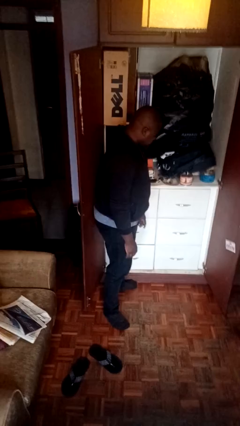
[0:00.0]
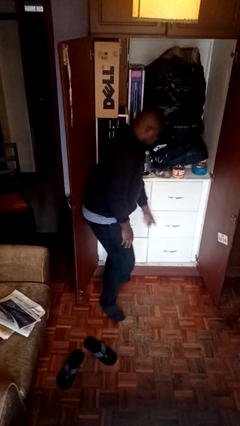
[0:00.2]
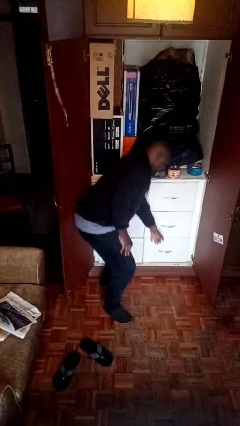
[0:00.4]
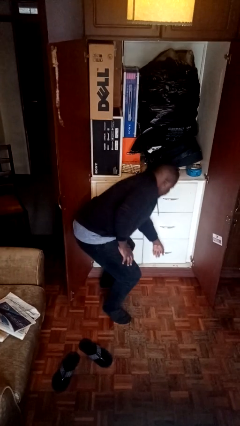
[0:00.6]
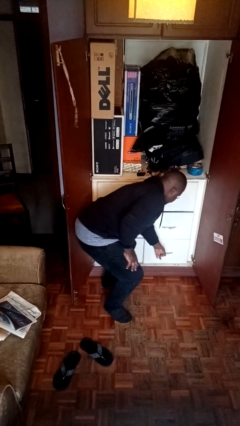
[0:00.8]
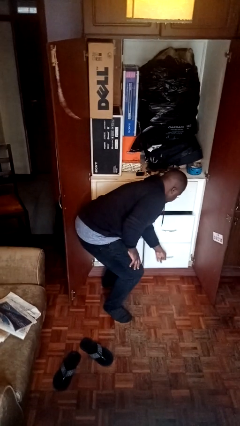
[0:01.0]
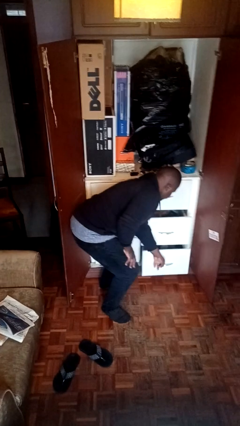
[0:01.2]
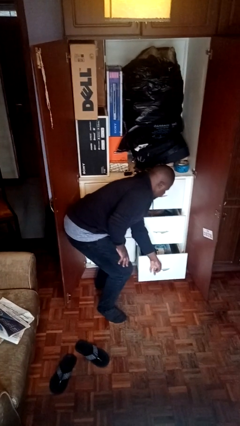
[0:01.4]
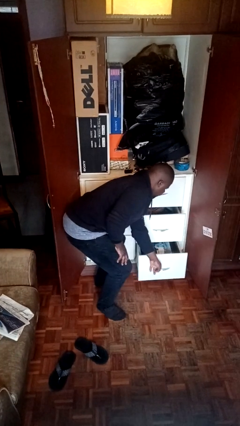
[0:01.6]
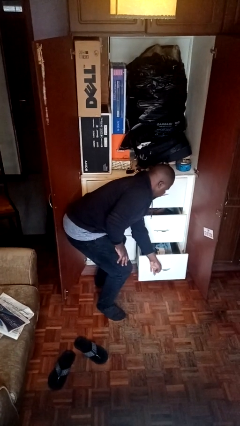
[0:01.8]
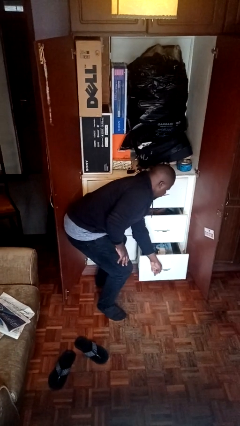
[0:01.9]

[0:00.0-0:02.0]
person opens dresser drawer

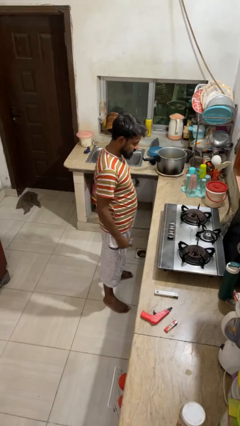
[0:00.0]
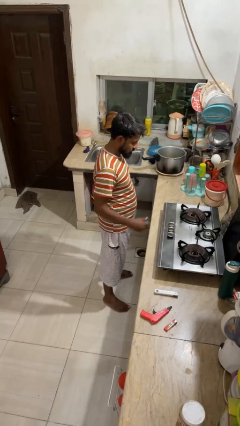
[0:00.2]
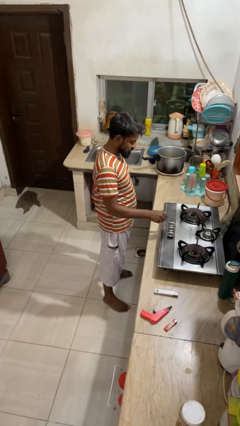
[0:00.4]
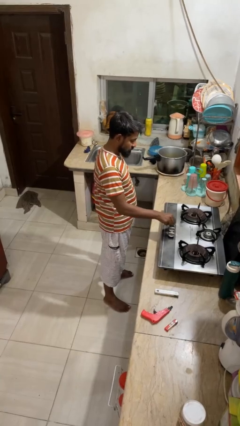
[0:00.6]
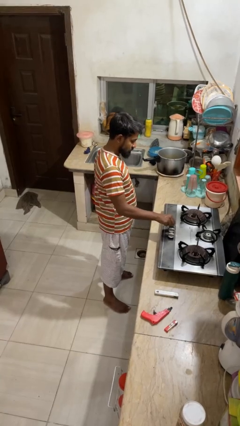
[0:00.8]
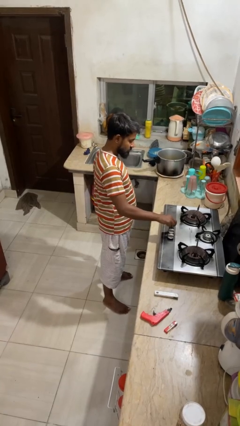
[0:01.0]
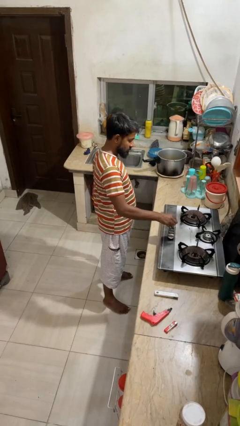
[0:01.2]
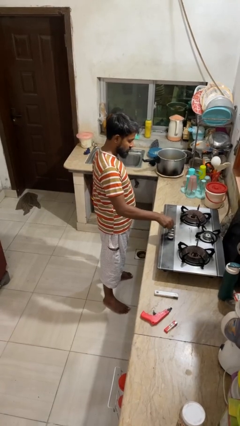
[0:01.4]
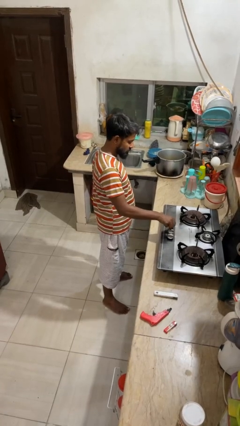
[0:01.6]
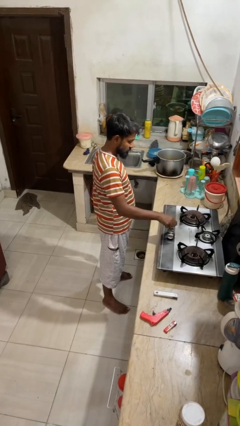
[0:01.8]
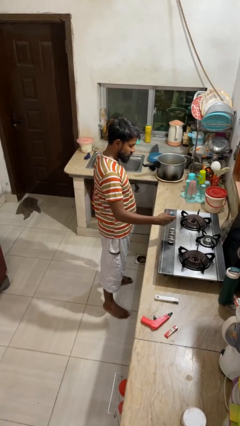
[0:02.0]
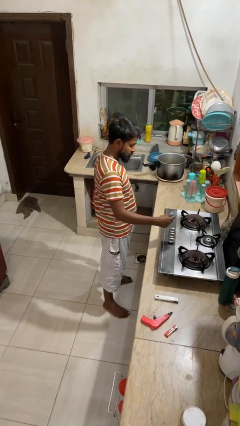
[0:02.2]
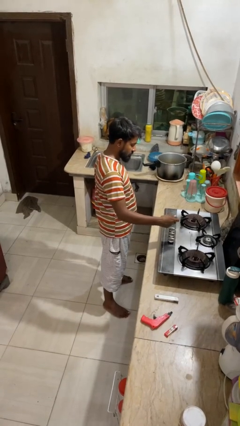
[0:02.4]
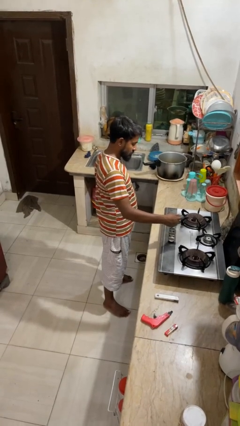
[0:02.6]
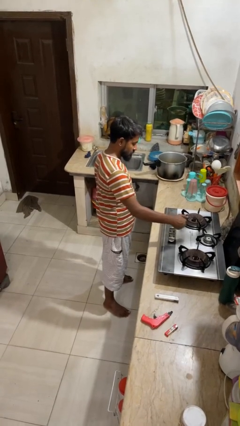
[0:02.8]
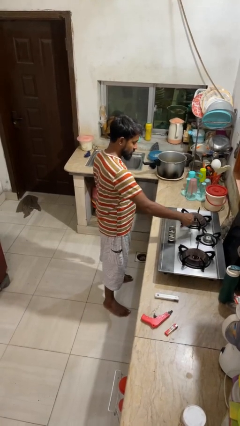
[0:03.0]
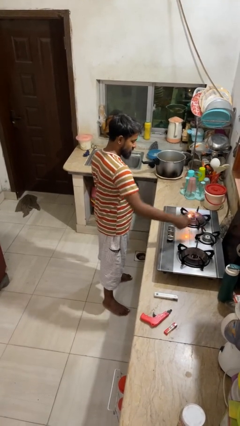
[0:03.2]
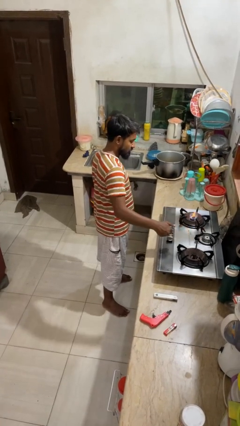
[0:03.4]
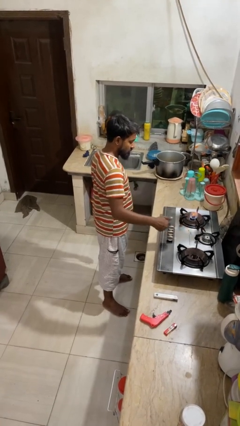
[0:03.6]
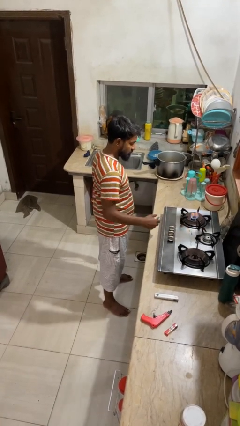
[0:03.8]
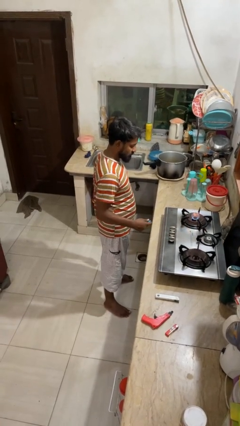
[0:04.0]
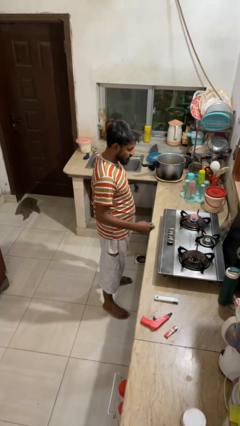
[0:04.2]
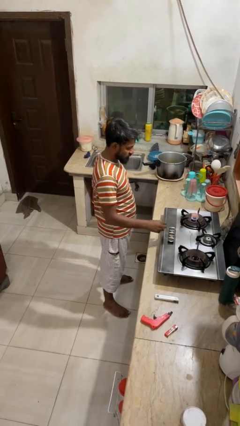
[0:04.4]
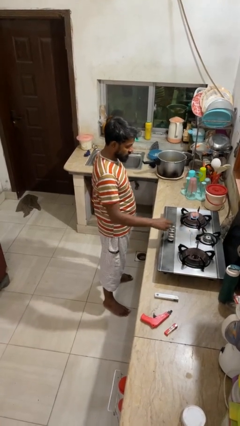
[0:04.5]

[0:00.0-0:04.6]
person turns on stovetop

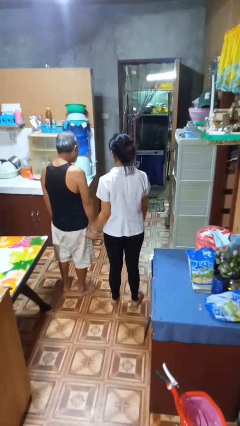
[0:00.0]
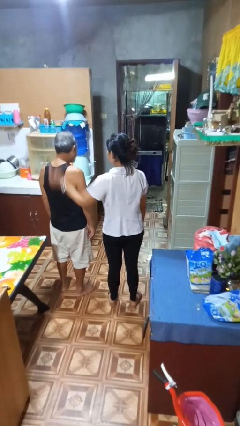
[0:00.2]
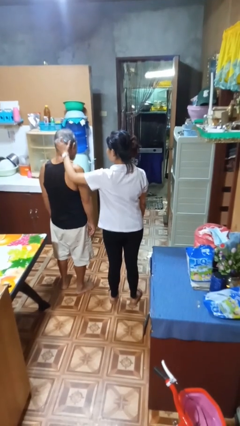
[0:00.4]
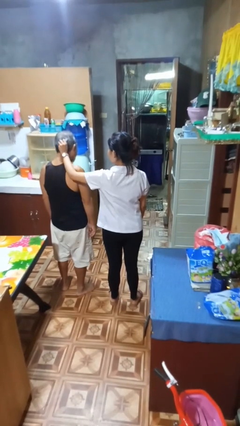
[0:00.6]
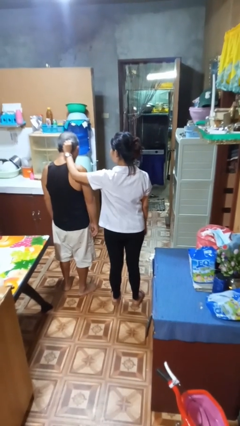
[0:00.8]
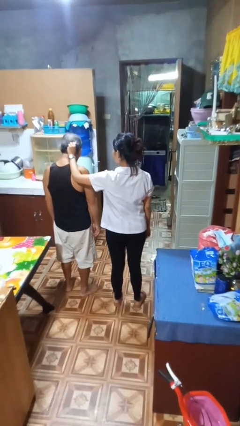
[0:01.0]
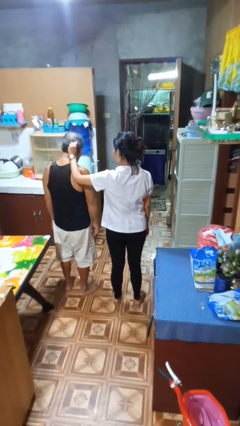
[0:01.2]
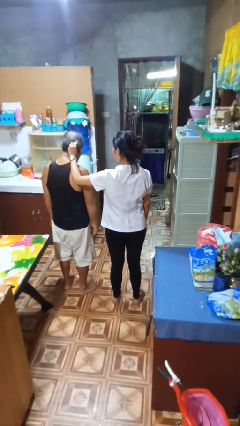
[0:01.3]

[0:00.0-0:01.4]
person grabs person by hair

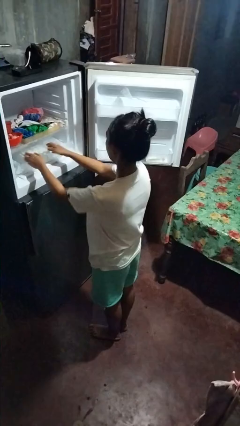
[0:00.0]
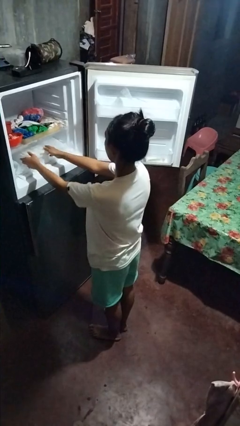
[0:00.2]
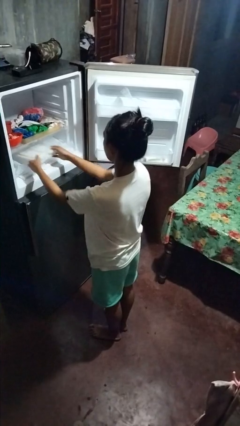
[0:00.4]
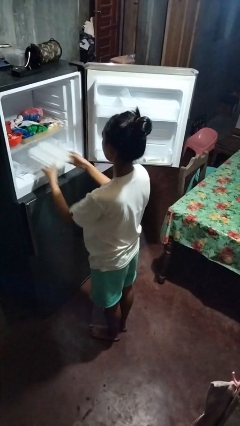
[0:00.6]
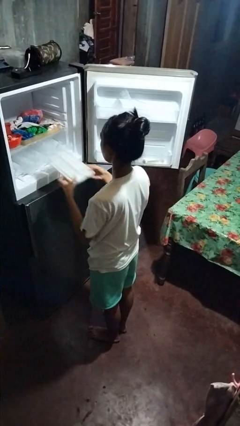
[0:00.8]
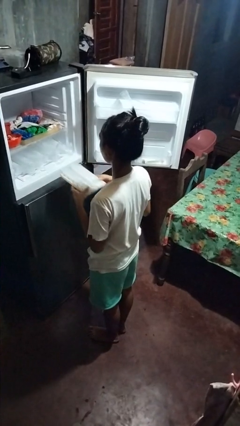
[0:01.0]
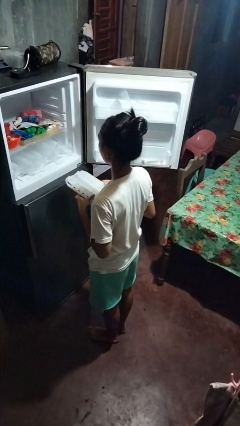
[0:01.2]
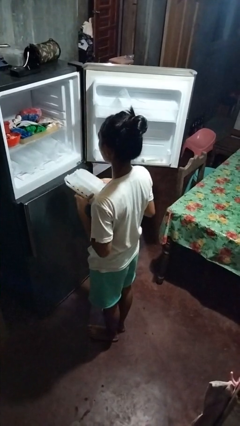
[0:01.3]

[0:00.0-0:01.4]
person takes object from refrigerator

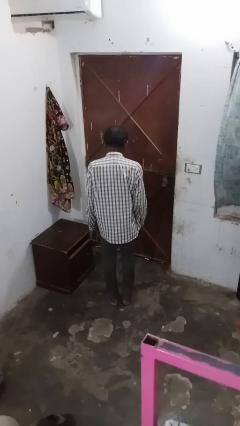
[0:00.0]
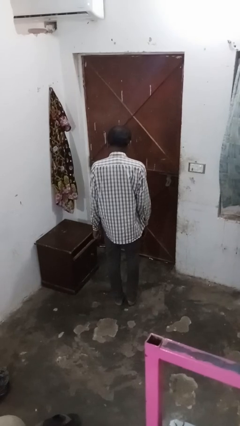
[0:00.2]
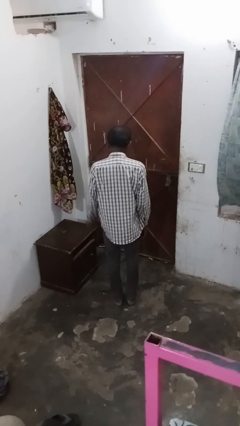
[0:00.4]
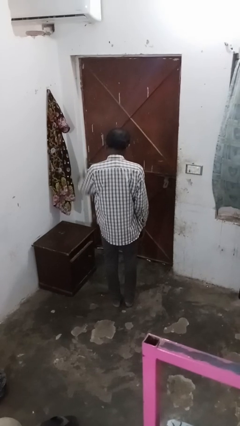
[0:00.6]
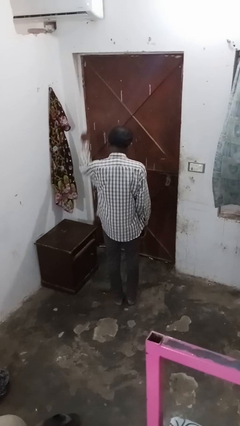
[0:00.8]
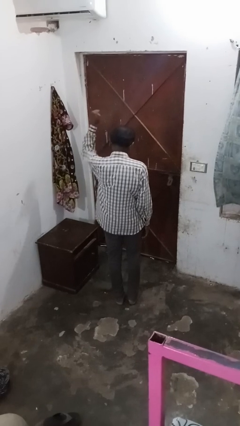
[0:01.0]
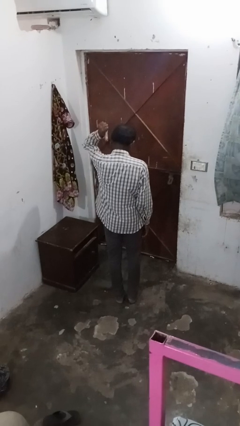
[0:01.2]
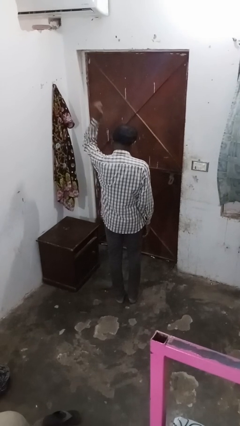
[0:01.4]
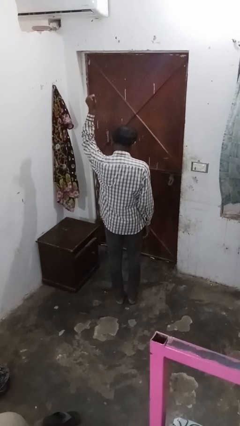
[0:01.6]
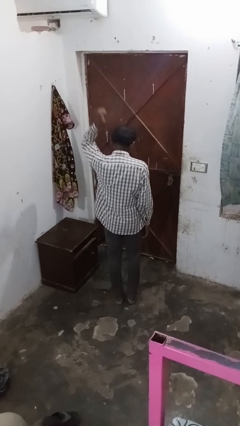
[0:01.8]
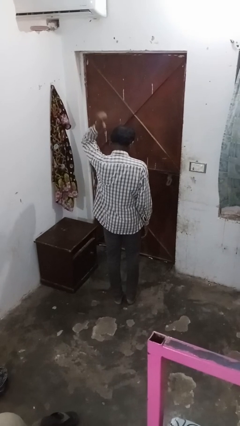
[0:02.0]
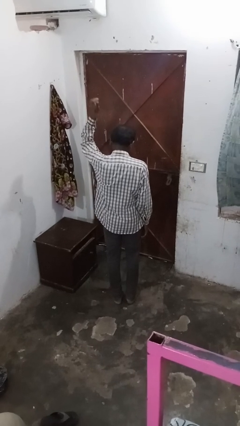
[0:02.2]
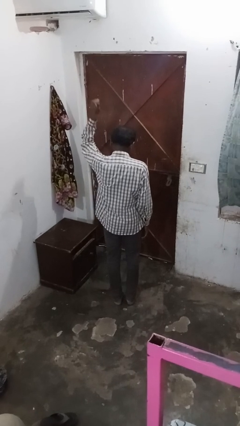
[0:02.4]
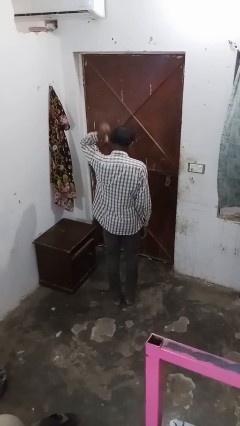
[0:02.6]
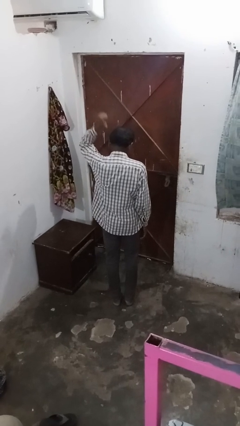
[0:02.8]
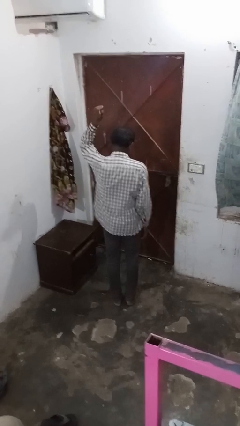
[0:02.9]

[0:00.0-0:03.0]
person gestures behind me

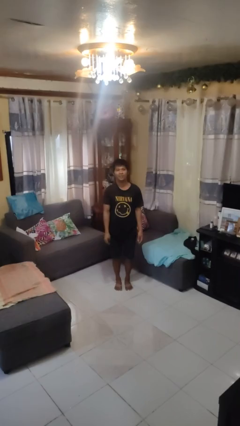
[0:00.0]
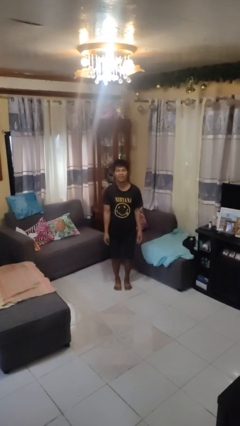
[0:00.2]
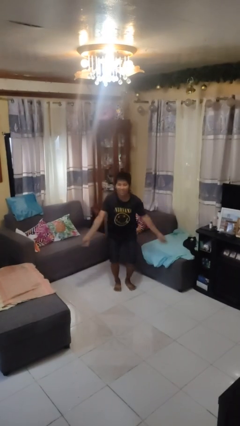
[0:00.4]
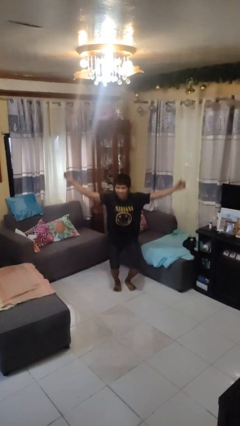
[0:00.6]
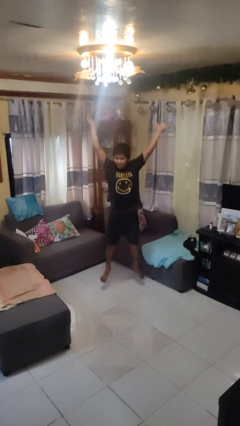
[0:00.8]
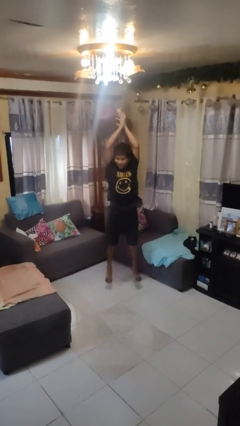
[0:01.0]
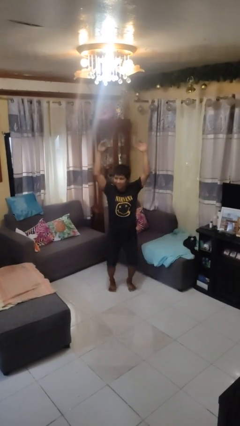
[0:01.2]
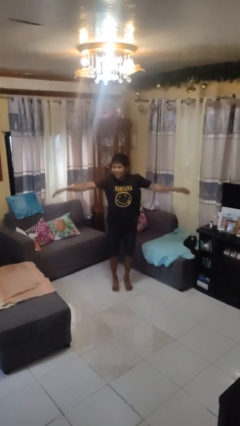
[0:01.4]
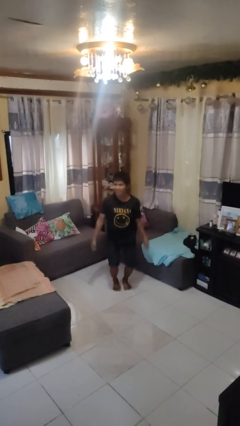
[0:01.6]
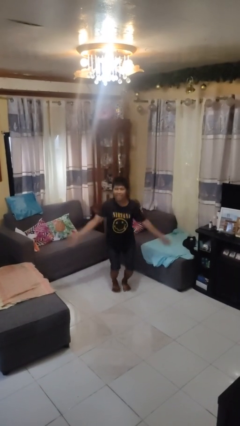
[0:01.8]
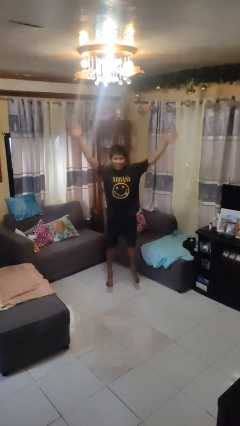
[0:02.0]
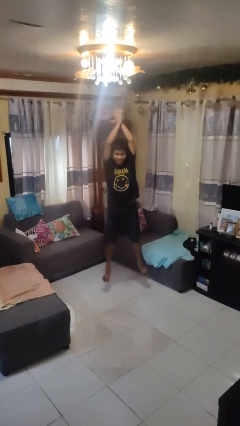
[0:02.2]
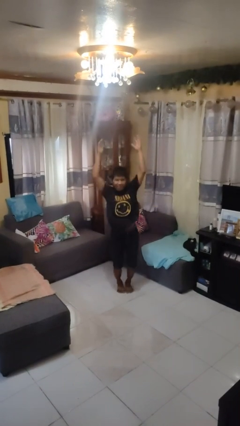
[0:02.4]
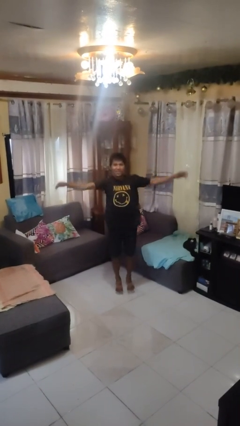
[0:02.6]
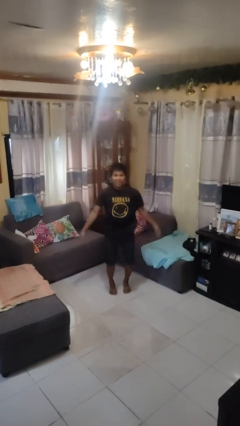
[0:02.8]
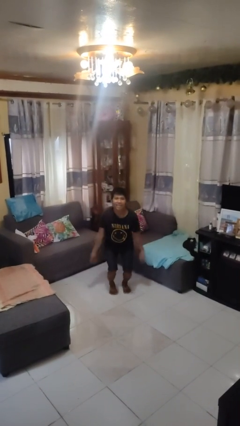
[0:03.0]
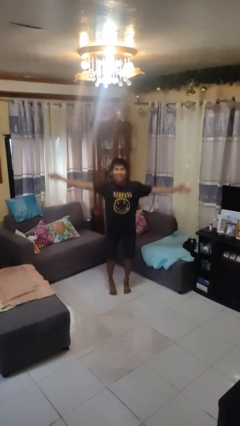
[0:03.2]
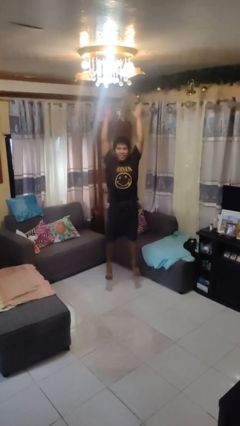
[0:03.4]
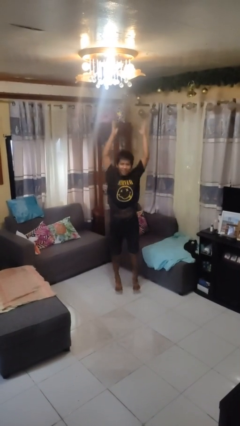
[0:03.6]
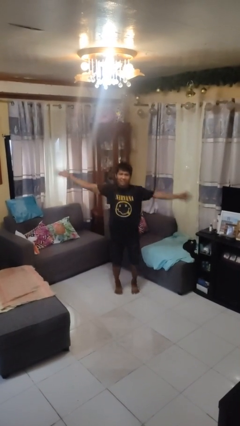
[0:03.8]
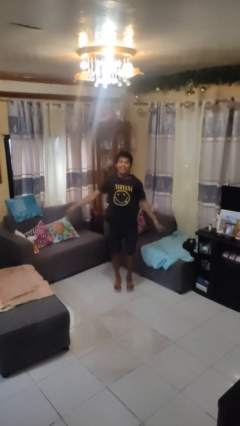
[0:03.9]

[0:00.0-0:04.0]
person exercises with jumping jacks

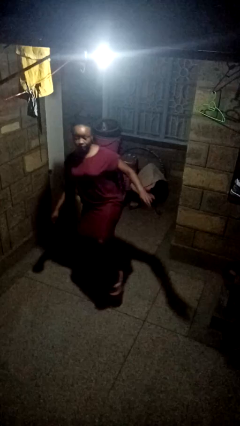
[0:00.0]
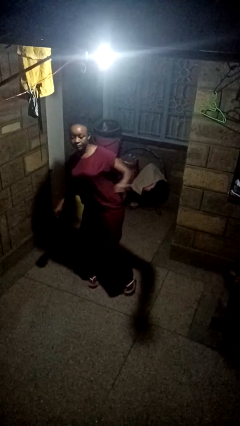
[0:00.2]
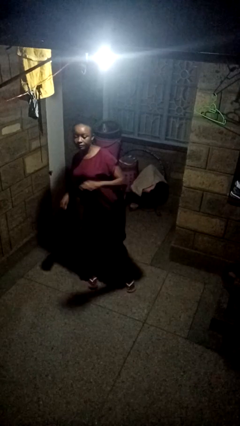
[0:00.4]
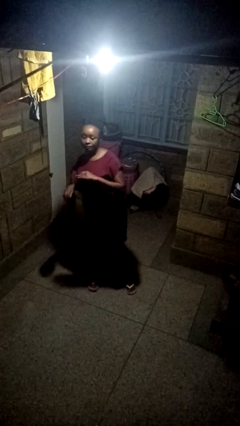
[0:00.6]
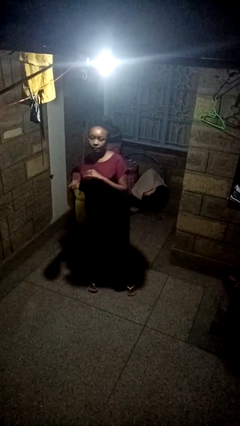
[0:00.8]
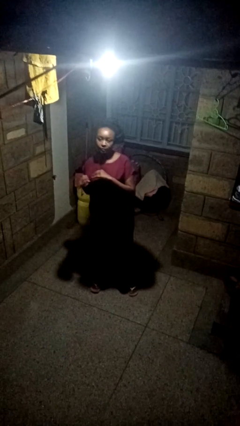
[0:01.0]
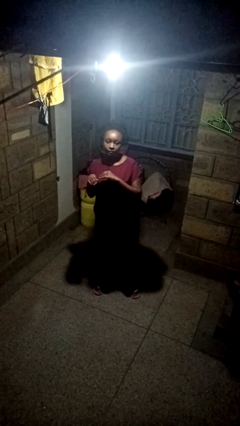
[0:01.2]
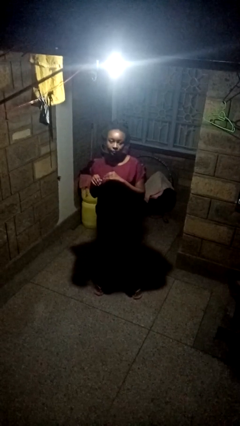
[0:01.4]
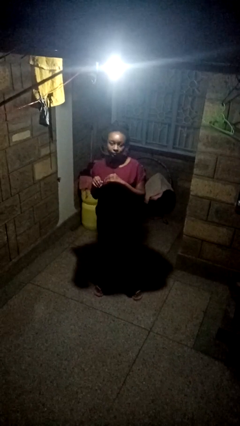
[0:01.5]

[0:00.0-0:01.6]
person karate kicks
